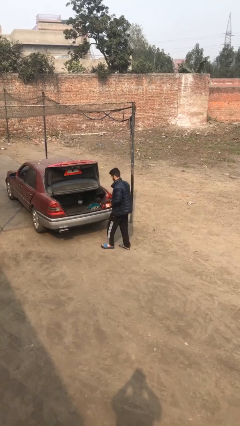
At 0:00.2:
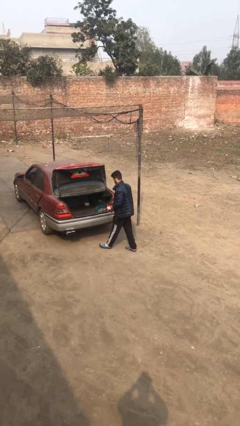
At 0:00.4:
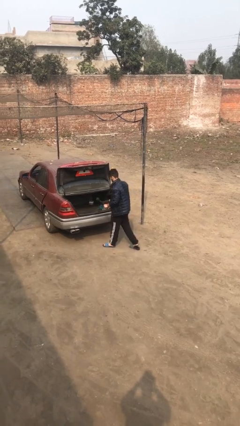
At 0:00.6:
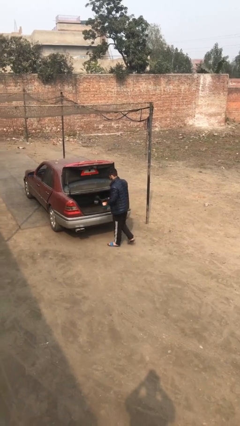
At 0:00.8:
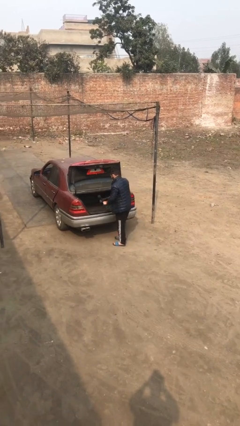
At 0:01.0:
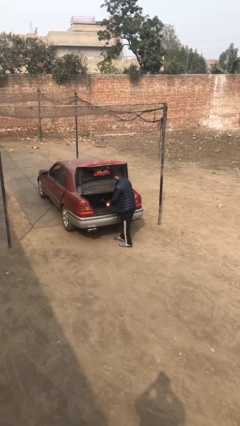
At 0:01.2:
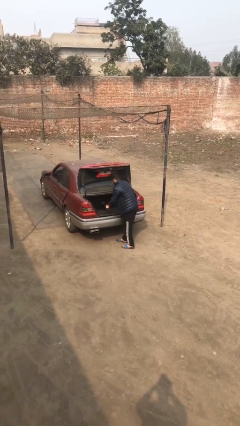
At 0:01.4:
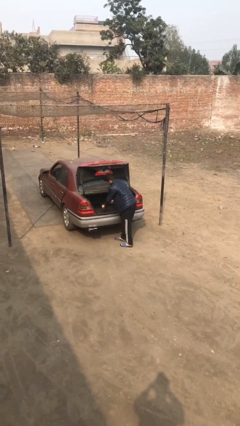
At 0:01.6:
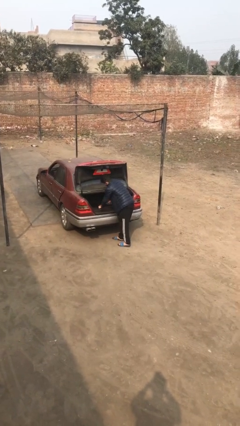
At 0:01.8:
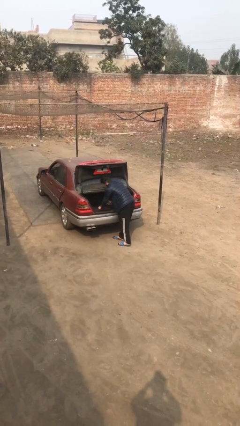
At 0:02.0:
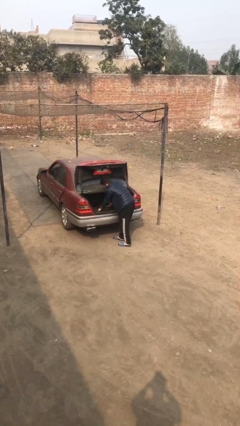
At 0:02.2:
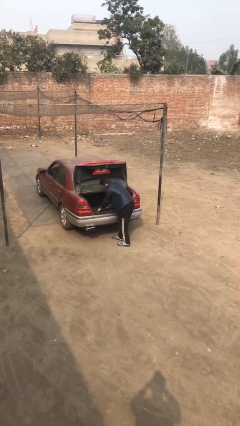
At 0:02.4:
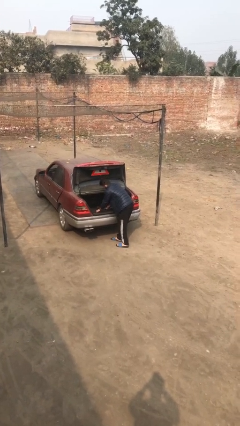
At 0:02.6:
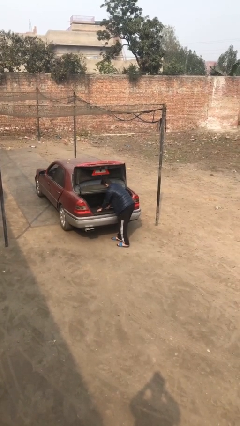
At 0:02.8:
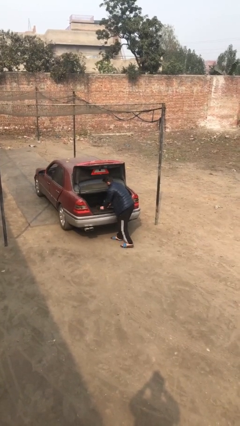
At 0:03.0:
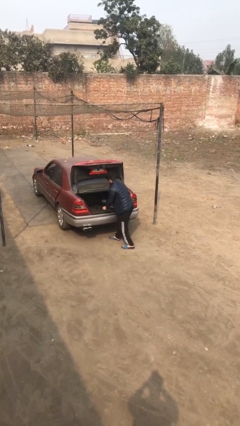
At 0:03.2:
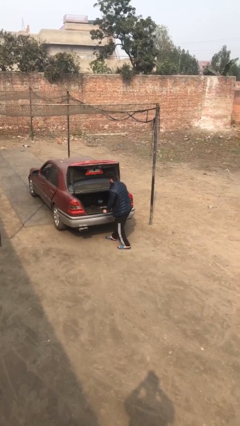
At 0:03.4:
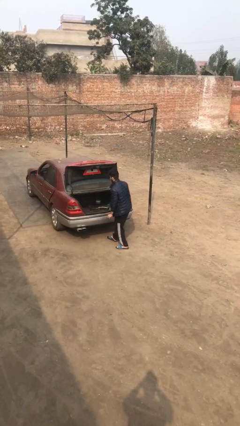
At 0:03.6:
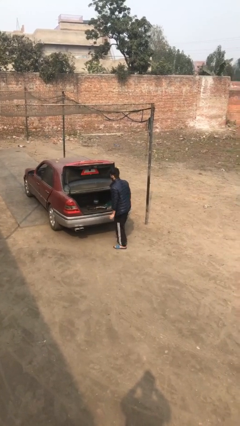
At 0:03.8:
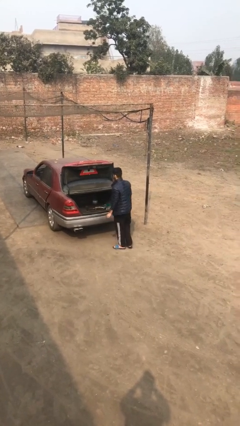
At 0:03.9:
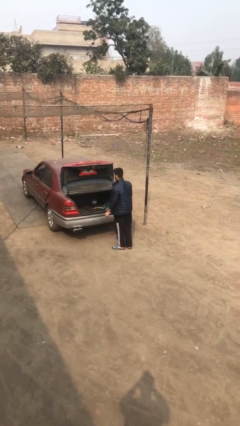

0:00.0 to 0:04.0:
person loads car

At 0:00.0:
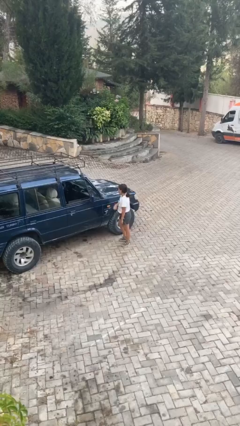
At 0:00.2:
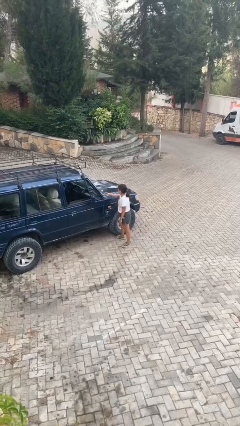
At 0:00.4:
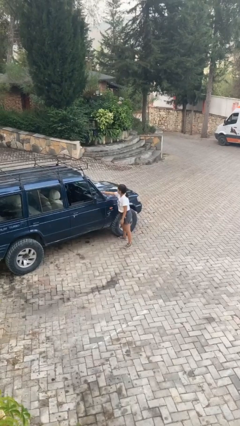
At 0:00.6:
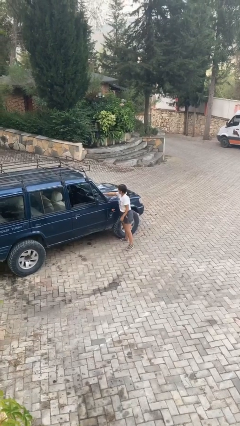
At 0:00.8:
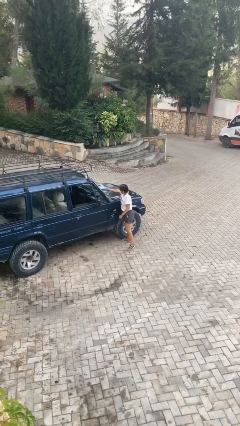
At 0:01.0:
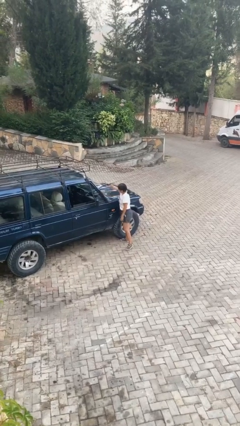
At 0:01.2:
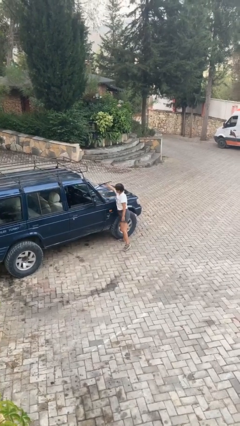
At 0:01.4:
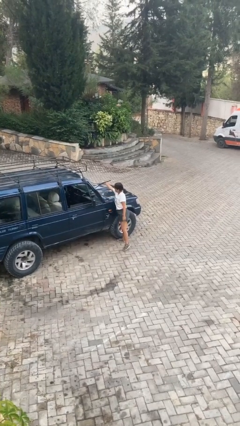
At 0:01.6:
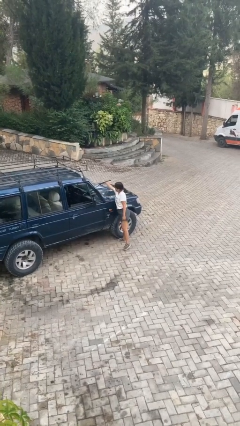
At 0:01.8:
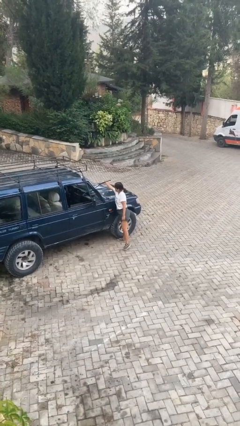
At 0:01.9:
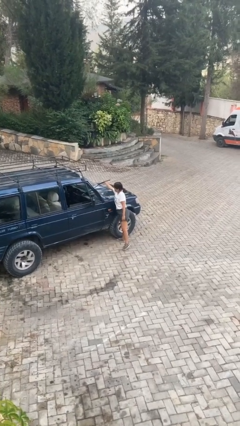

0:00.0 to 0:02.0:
person flips up car wipers

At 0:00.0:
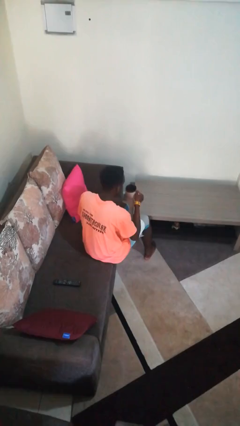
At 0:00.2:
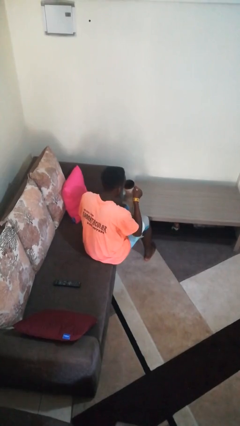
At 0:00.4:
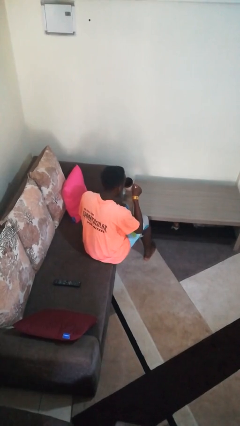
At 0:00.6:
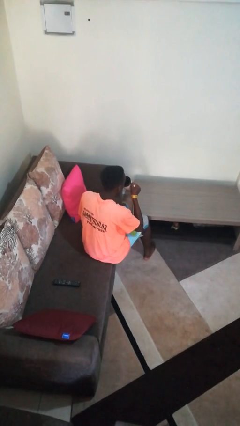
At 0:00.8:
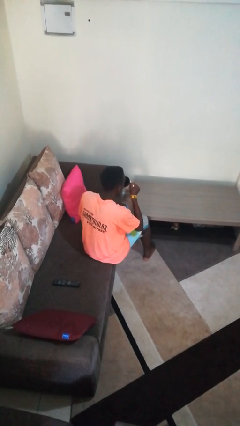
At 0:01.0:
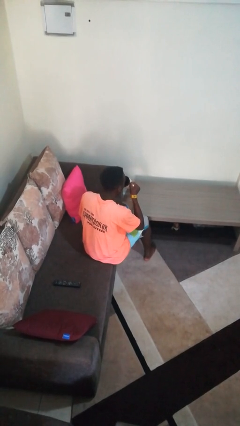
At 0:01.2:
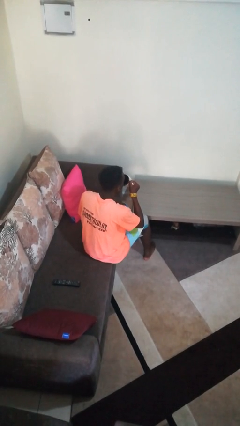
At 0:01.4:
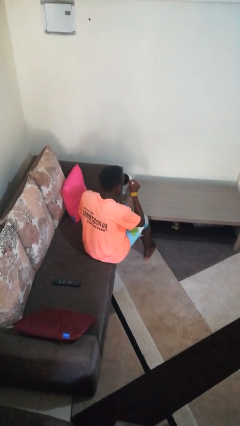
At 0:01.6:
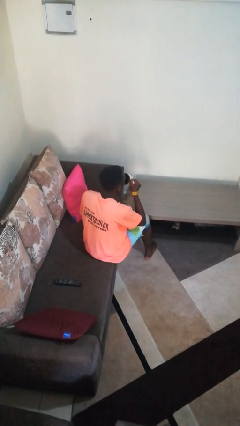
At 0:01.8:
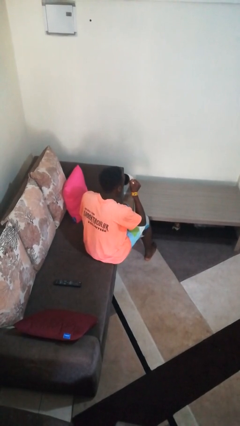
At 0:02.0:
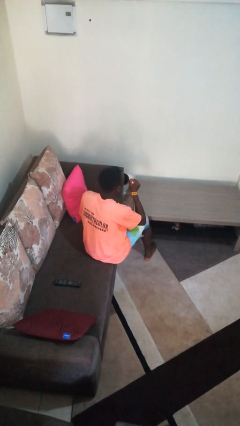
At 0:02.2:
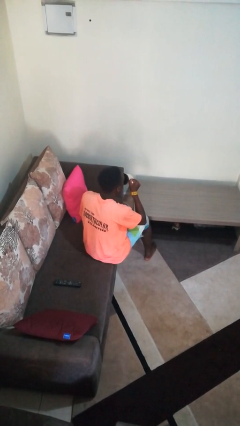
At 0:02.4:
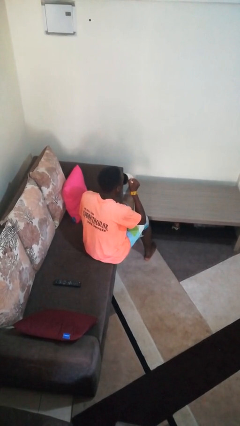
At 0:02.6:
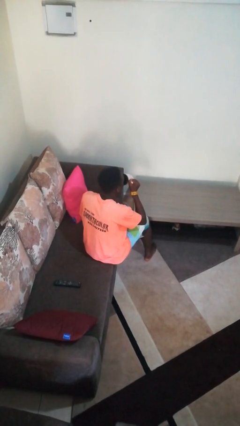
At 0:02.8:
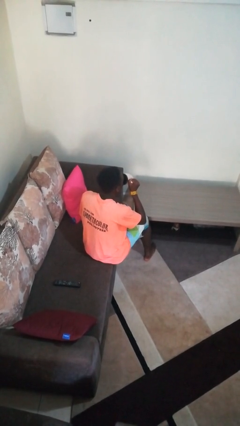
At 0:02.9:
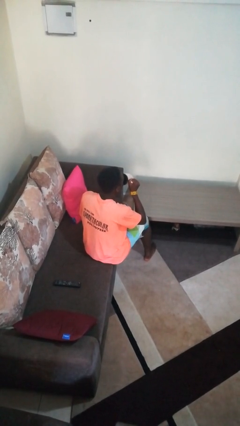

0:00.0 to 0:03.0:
person drinks from mug

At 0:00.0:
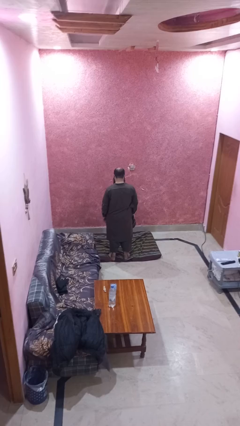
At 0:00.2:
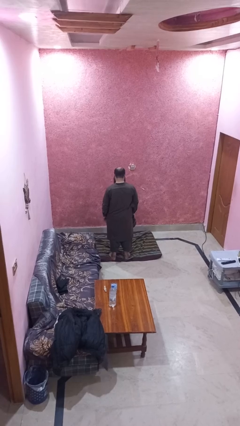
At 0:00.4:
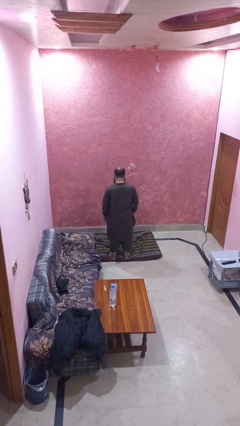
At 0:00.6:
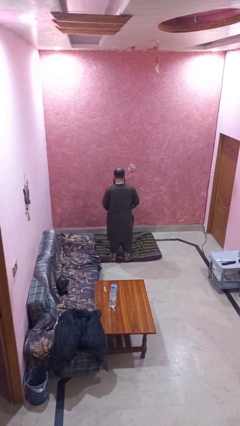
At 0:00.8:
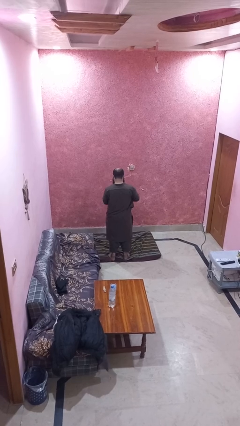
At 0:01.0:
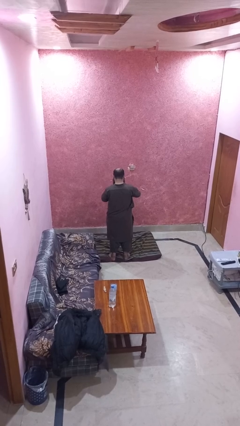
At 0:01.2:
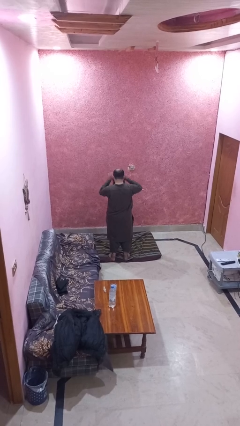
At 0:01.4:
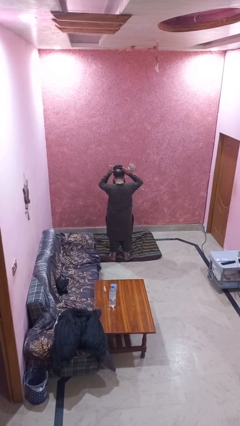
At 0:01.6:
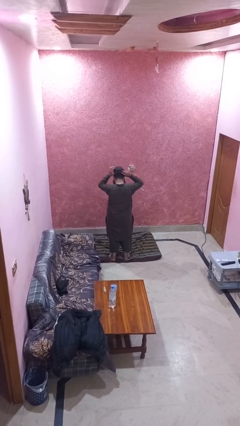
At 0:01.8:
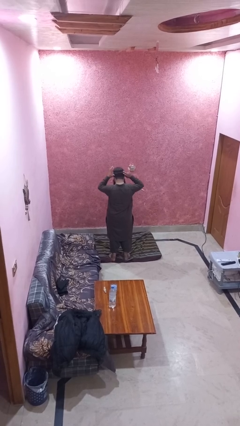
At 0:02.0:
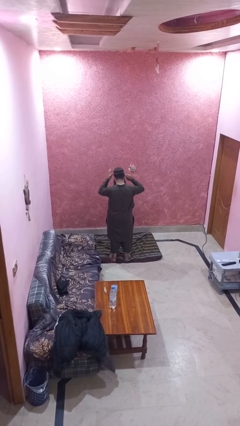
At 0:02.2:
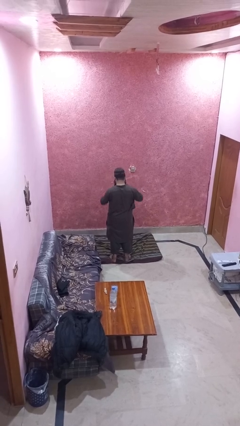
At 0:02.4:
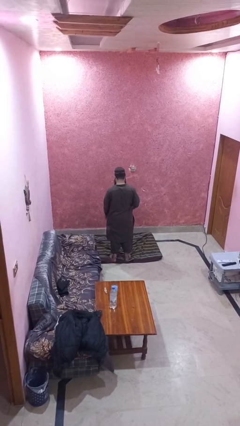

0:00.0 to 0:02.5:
person puts on hat

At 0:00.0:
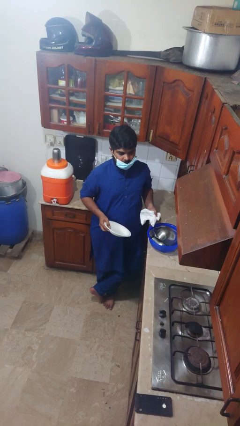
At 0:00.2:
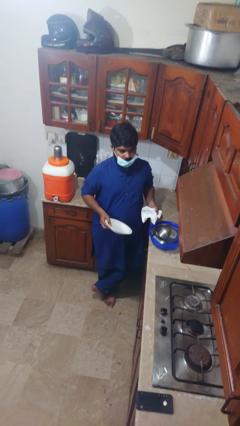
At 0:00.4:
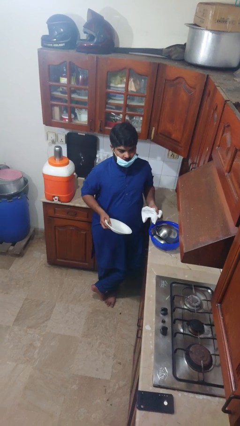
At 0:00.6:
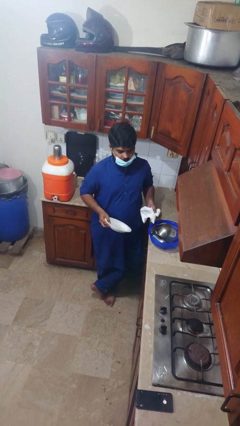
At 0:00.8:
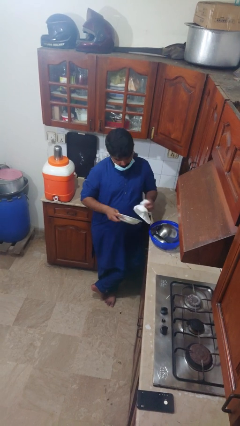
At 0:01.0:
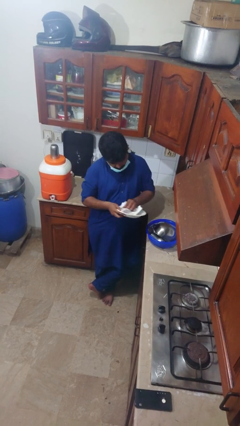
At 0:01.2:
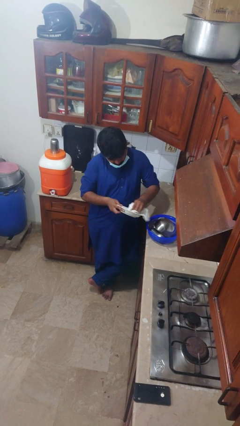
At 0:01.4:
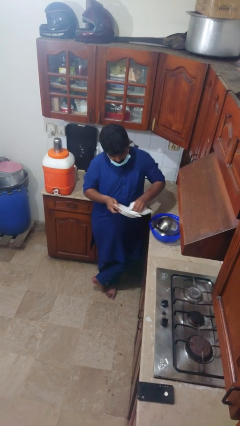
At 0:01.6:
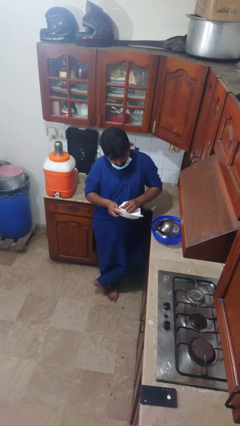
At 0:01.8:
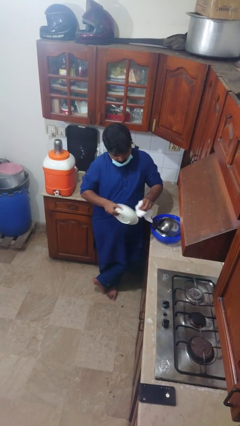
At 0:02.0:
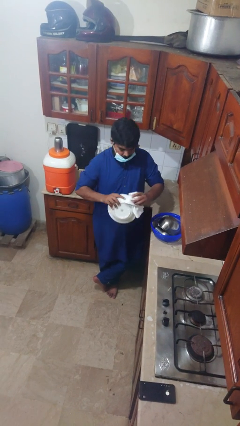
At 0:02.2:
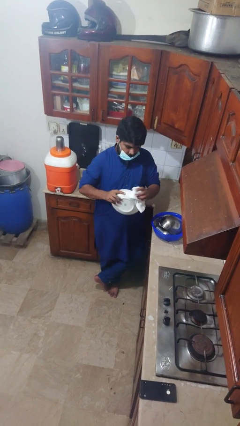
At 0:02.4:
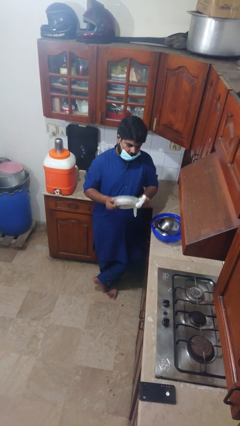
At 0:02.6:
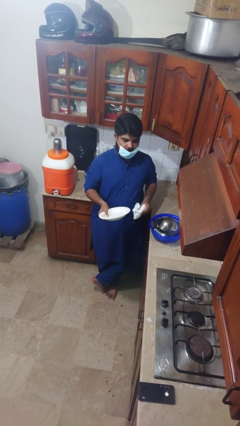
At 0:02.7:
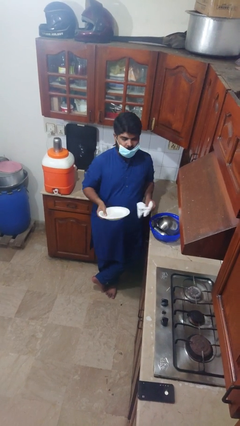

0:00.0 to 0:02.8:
person dries dish

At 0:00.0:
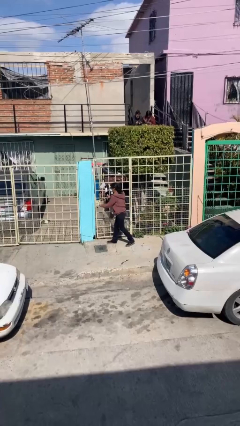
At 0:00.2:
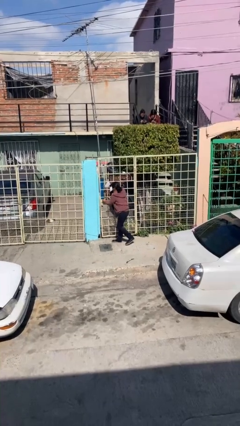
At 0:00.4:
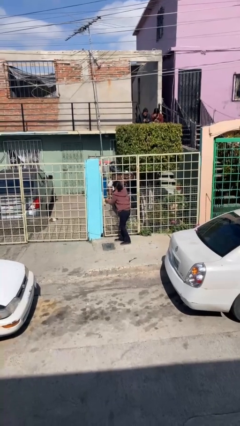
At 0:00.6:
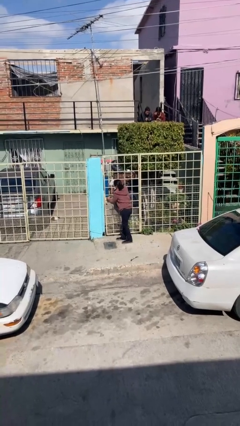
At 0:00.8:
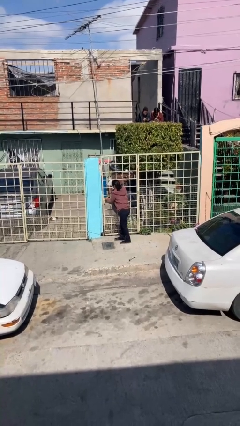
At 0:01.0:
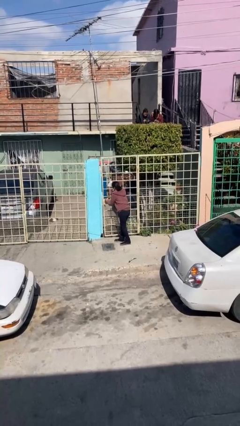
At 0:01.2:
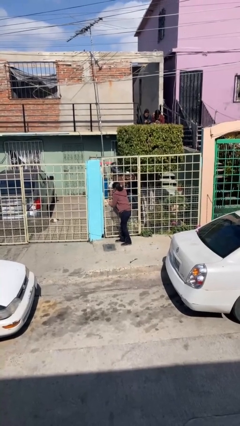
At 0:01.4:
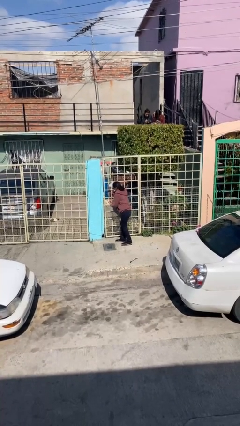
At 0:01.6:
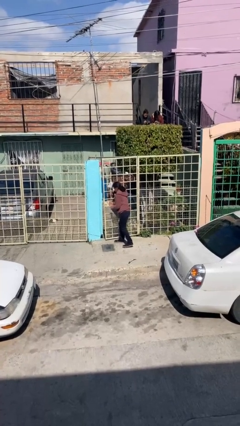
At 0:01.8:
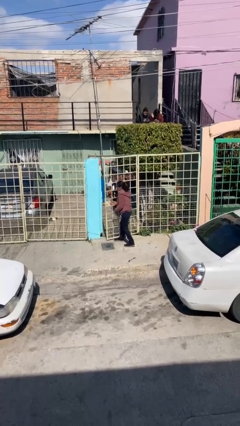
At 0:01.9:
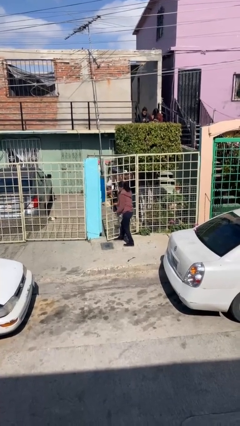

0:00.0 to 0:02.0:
person opens facility door

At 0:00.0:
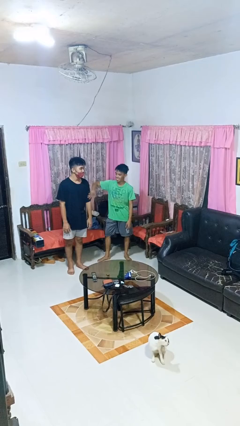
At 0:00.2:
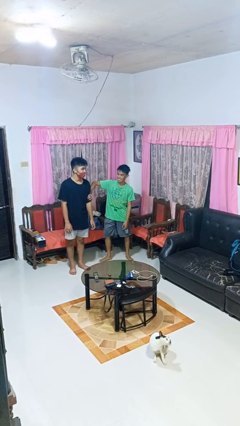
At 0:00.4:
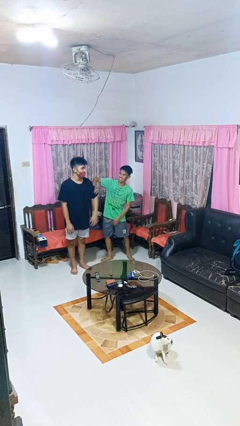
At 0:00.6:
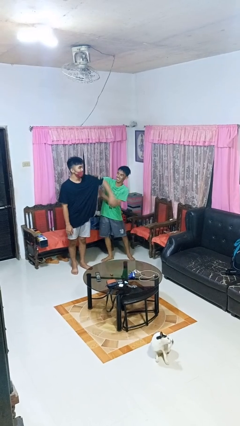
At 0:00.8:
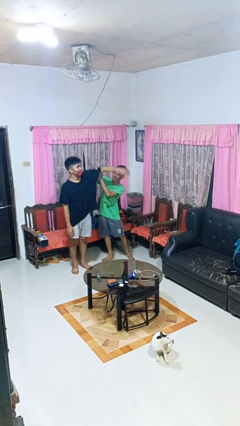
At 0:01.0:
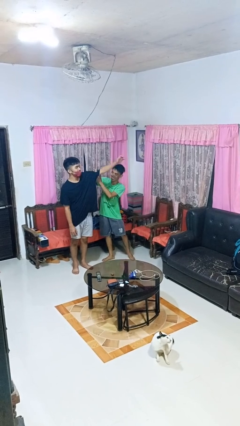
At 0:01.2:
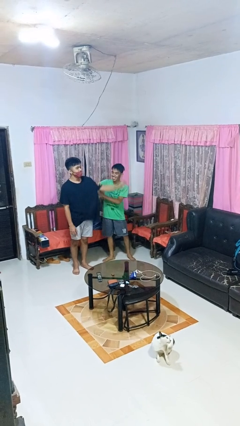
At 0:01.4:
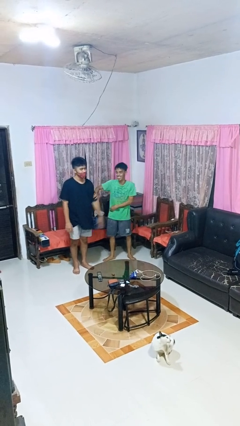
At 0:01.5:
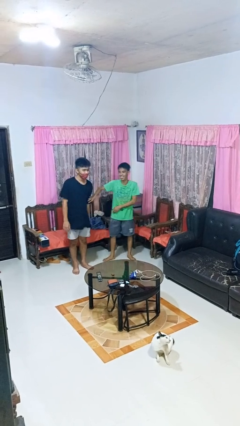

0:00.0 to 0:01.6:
person grabs person by bicep
